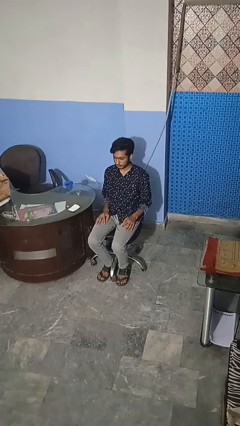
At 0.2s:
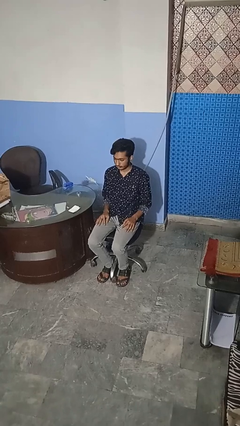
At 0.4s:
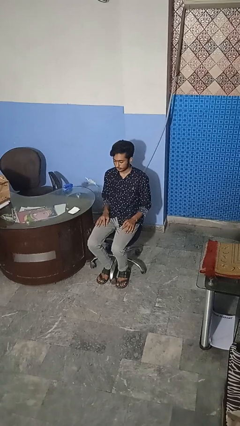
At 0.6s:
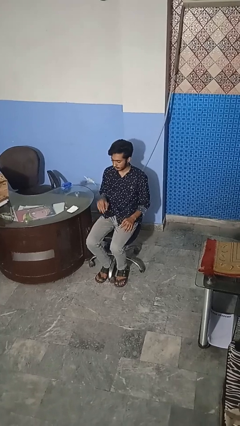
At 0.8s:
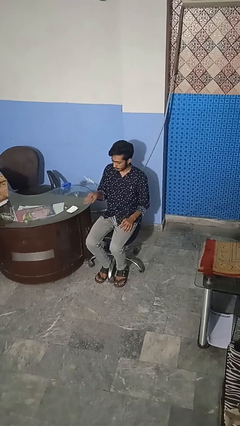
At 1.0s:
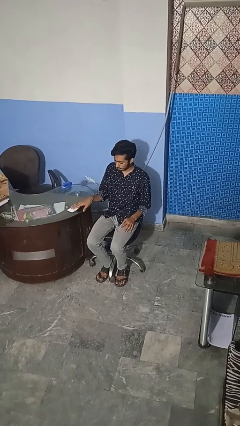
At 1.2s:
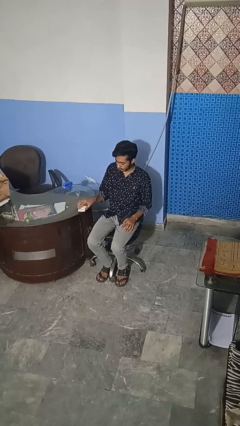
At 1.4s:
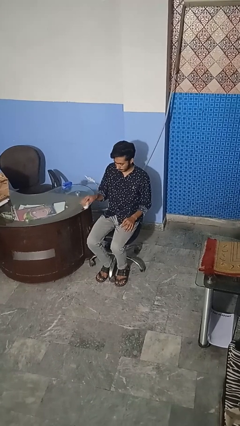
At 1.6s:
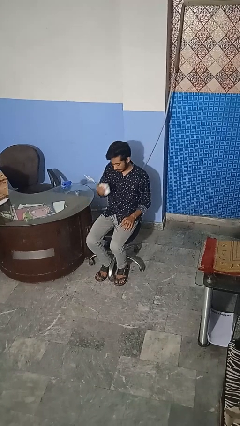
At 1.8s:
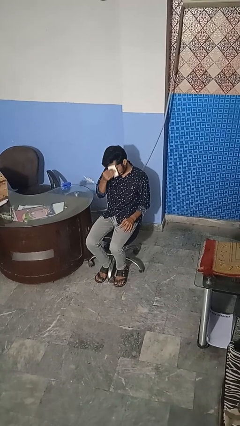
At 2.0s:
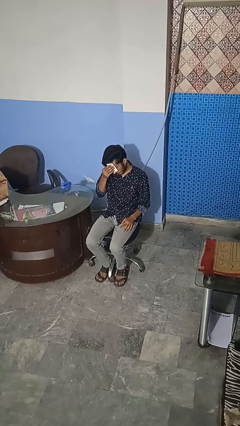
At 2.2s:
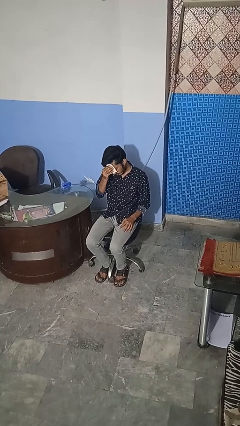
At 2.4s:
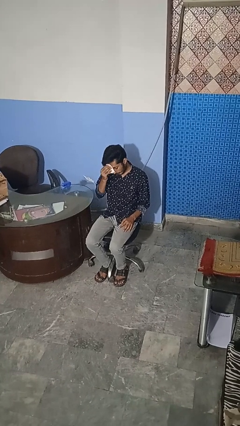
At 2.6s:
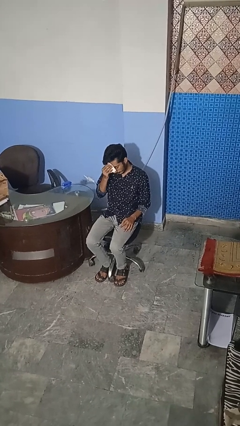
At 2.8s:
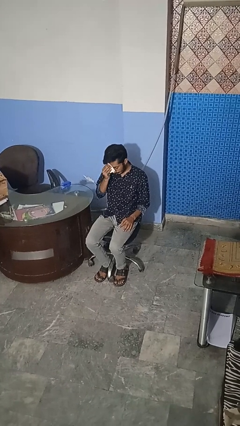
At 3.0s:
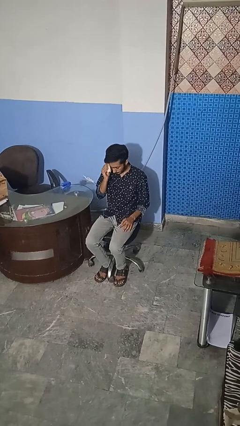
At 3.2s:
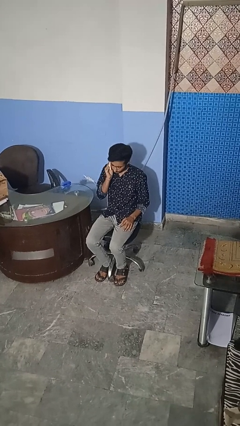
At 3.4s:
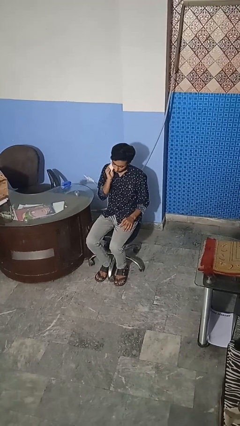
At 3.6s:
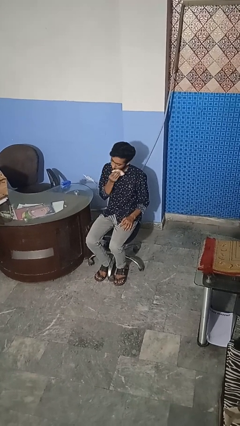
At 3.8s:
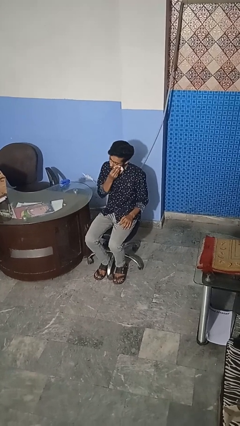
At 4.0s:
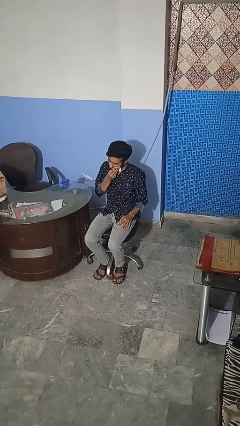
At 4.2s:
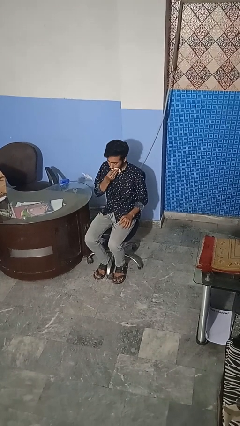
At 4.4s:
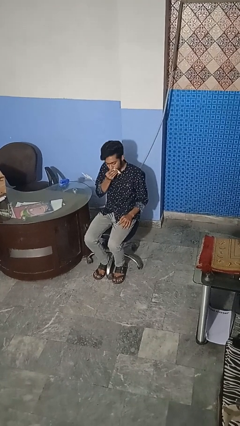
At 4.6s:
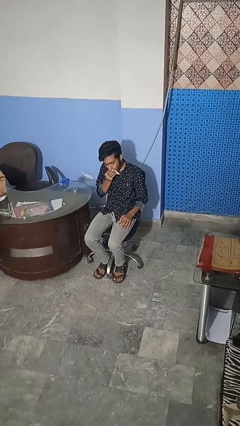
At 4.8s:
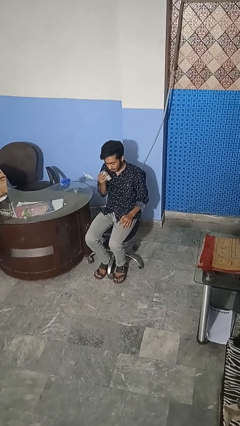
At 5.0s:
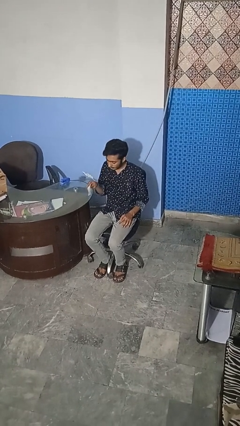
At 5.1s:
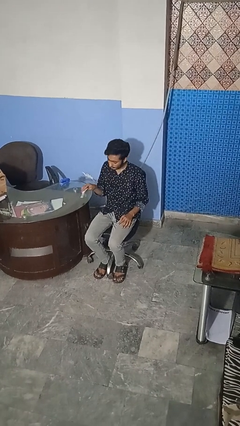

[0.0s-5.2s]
person wipes mouth with napkin

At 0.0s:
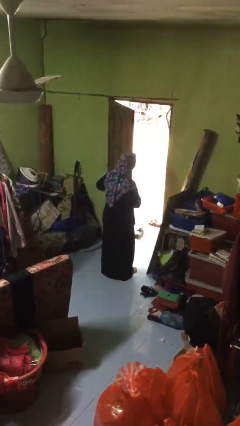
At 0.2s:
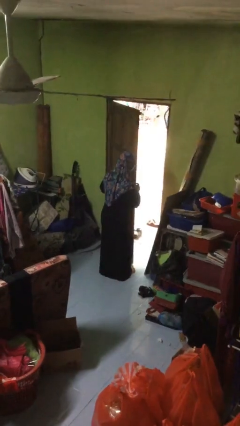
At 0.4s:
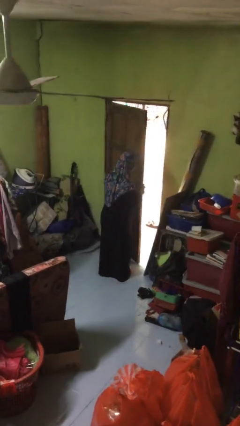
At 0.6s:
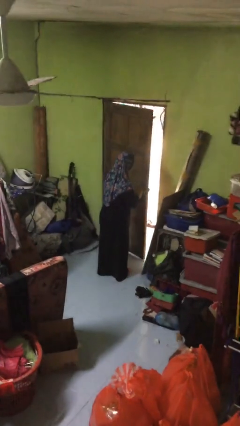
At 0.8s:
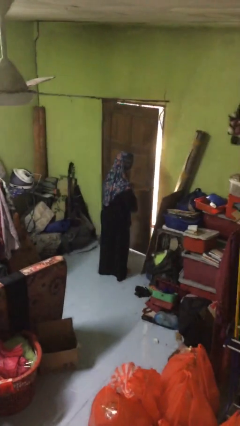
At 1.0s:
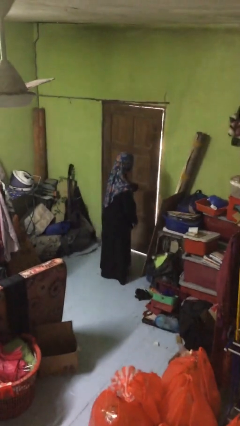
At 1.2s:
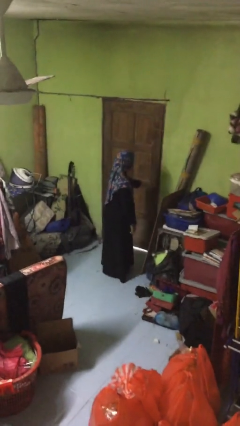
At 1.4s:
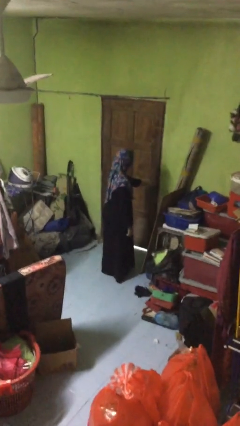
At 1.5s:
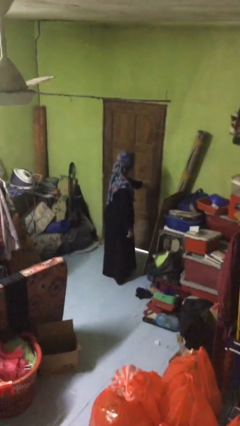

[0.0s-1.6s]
person closes facility door

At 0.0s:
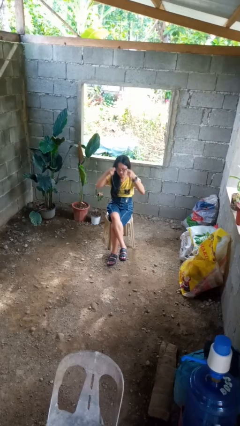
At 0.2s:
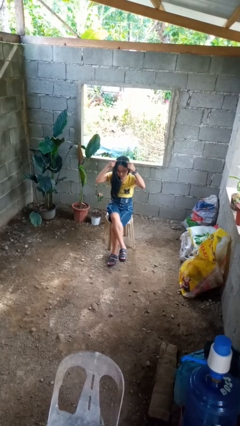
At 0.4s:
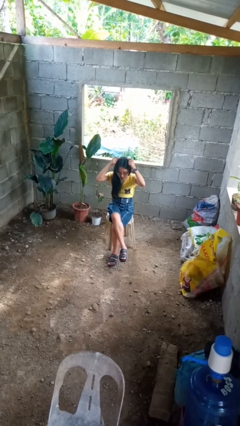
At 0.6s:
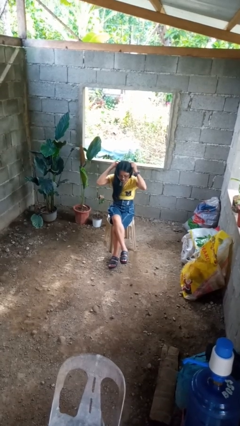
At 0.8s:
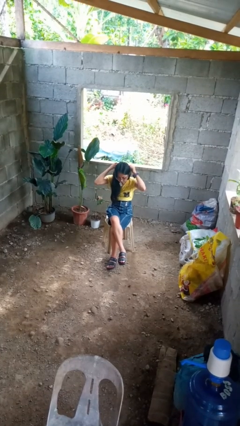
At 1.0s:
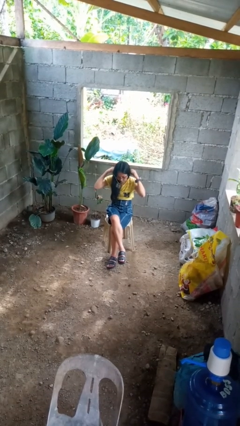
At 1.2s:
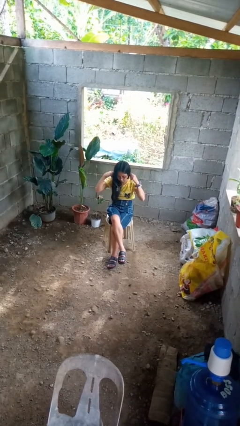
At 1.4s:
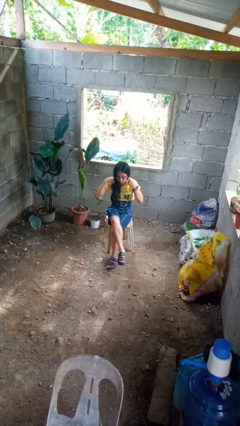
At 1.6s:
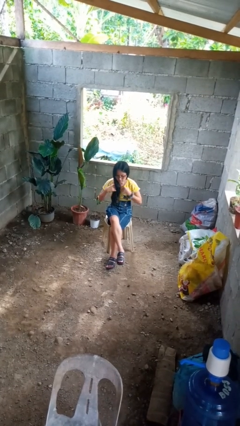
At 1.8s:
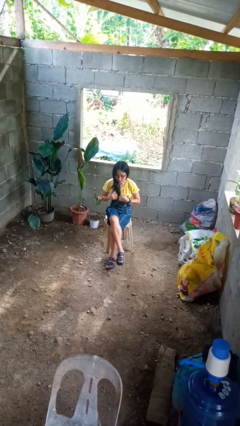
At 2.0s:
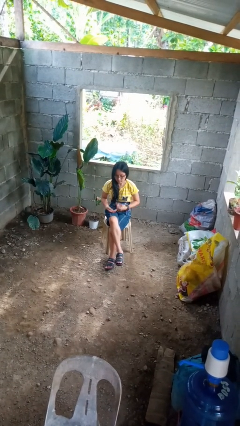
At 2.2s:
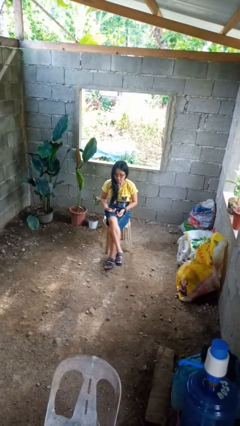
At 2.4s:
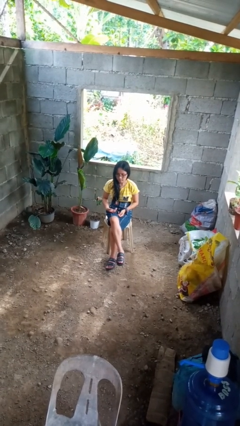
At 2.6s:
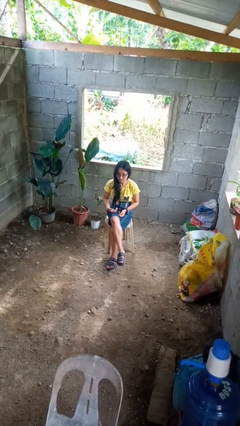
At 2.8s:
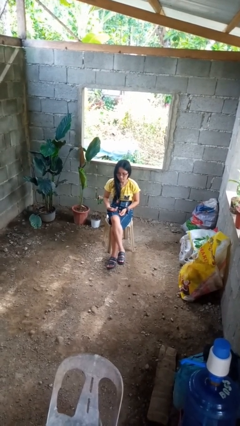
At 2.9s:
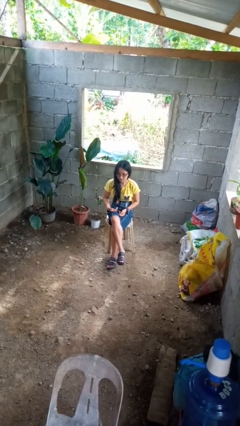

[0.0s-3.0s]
person puts on necklace

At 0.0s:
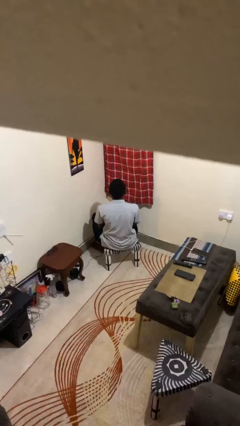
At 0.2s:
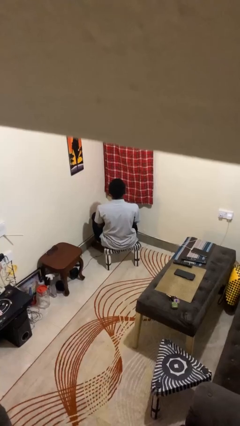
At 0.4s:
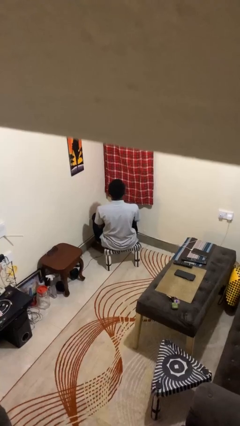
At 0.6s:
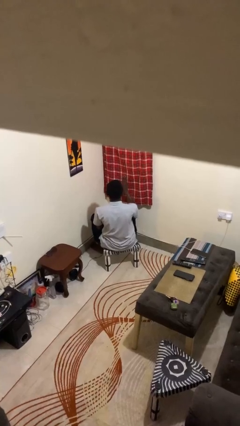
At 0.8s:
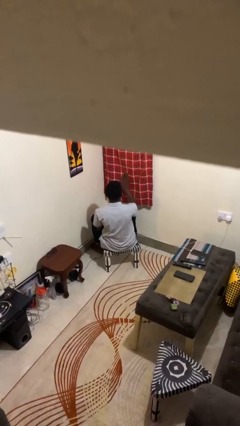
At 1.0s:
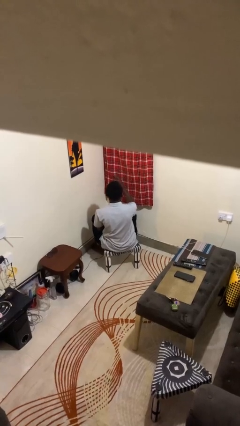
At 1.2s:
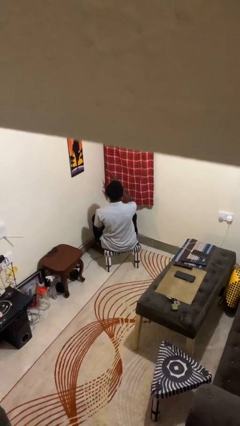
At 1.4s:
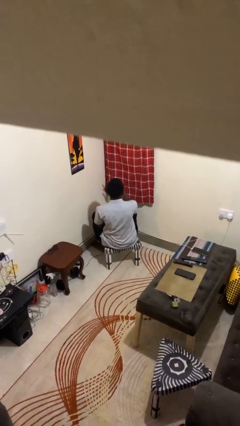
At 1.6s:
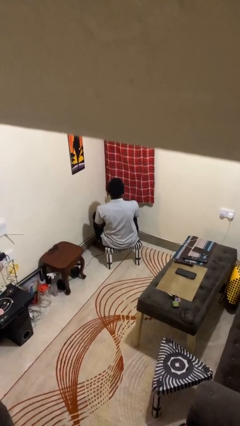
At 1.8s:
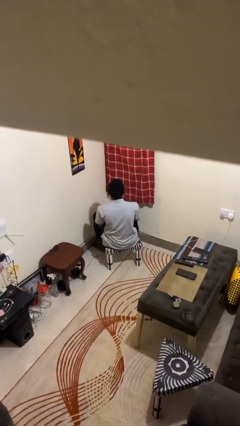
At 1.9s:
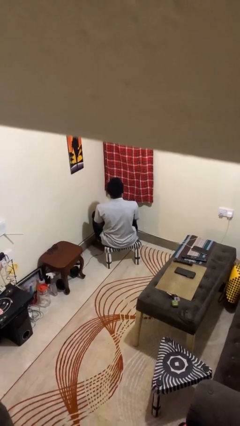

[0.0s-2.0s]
person gestures swipe left

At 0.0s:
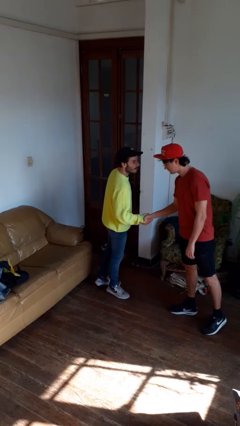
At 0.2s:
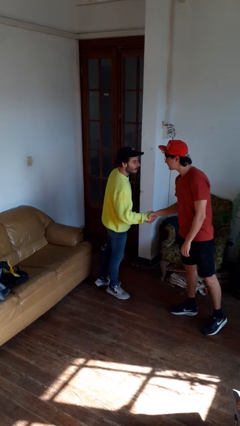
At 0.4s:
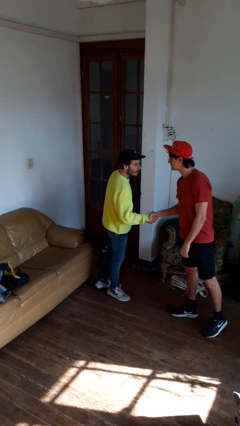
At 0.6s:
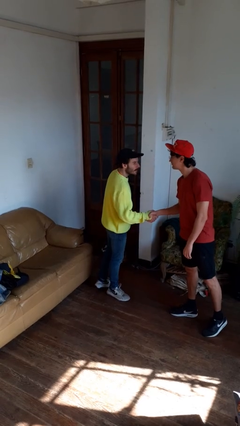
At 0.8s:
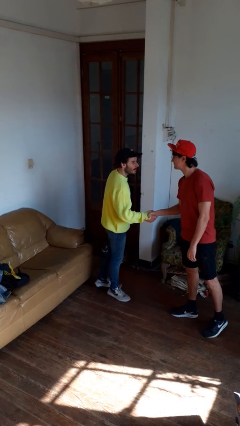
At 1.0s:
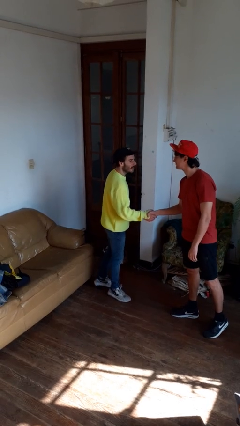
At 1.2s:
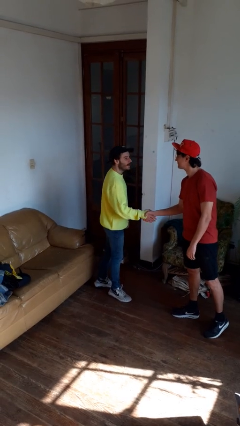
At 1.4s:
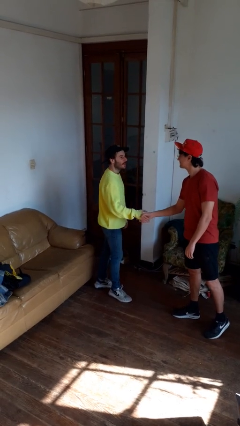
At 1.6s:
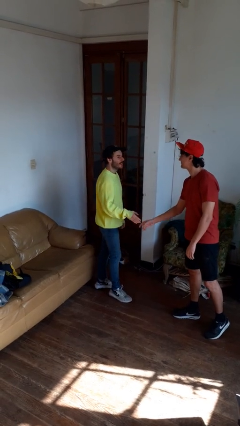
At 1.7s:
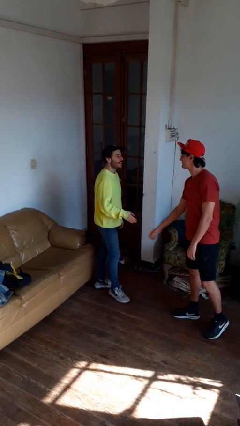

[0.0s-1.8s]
person highfives hand

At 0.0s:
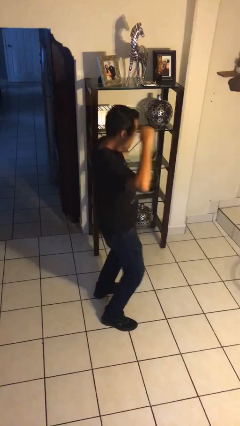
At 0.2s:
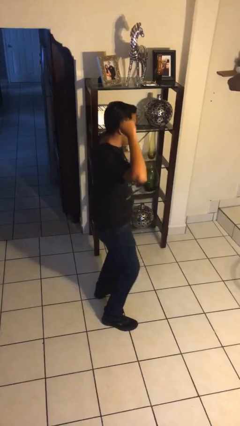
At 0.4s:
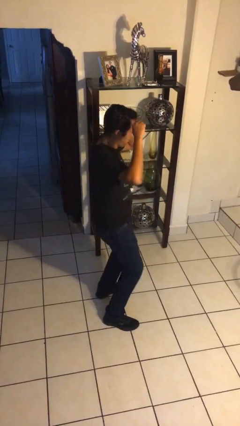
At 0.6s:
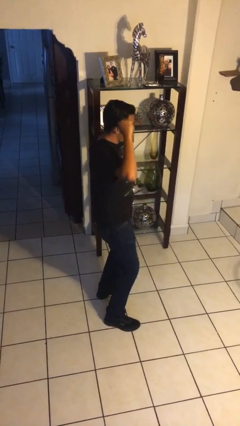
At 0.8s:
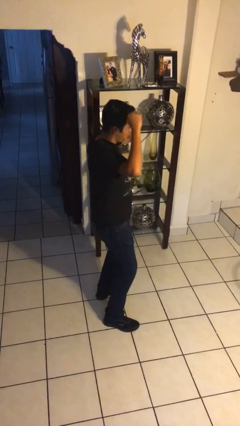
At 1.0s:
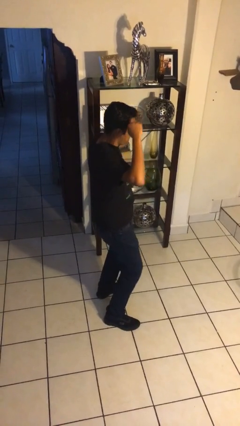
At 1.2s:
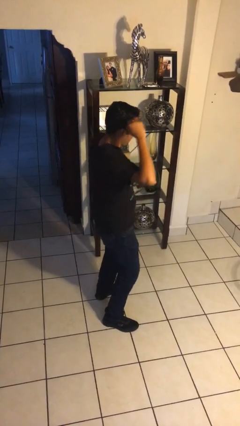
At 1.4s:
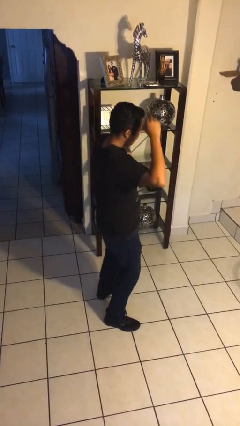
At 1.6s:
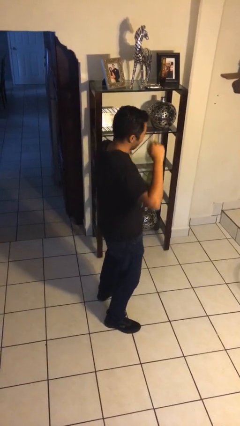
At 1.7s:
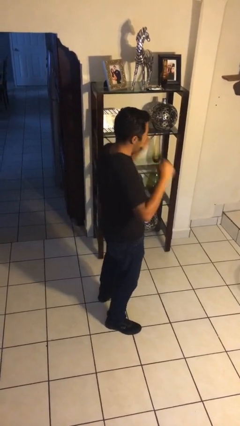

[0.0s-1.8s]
person dances in place

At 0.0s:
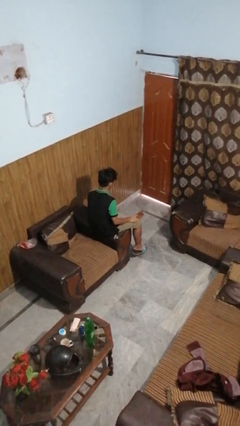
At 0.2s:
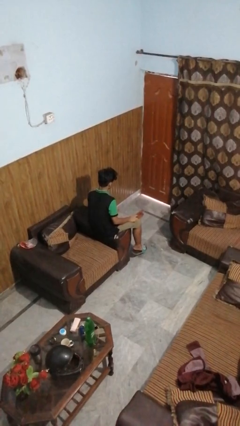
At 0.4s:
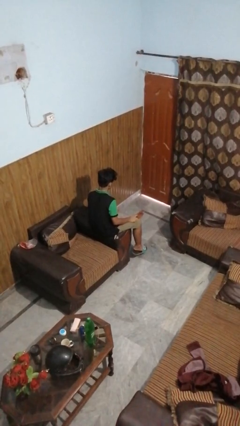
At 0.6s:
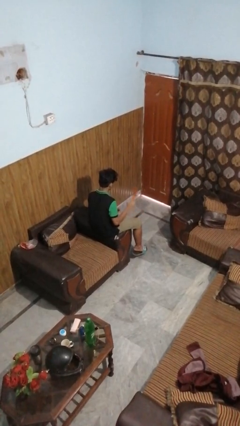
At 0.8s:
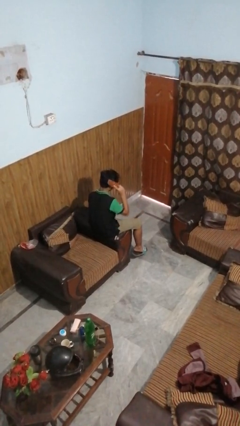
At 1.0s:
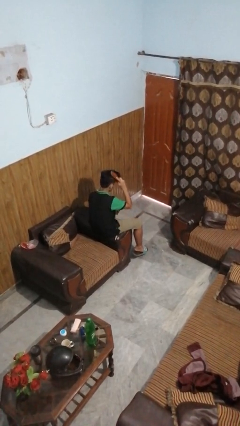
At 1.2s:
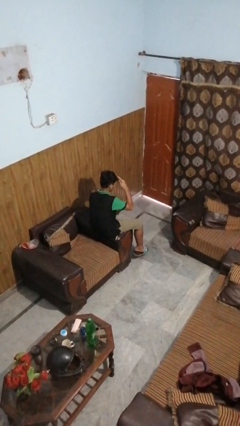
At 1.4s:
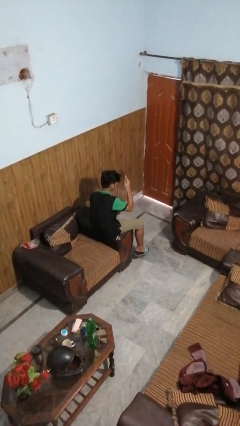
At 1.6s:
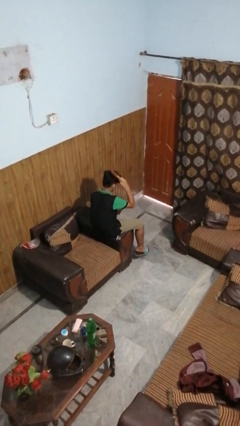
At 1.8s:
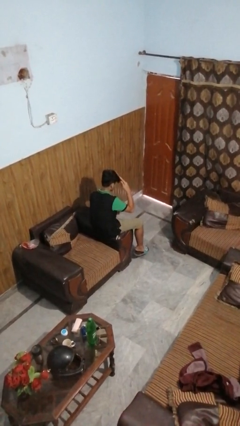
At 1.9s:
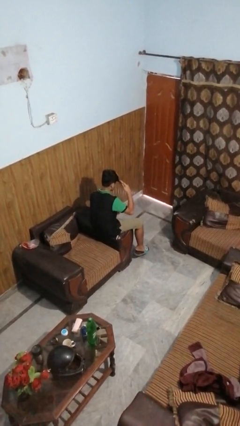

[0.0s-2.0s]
person brushes hair
